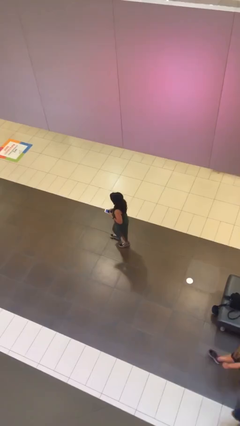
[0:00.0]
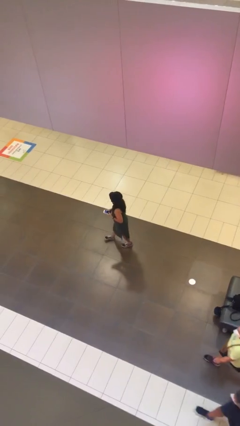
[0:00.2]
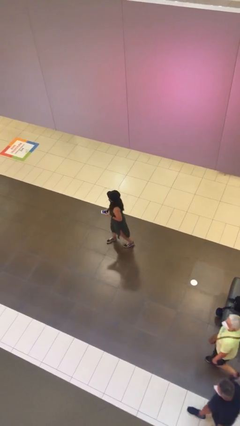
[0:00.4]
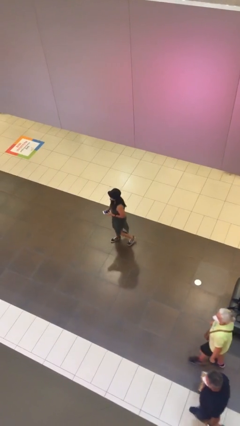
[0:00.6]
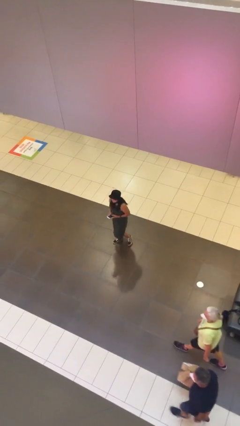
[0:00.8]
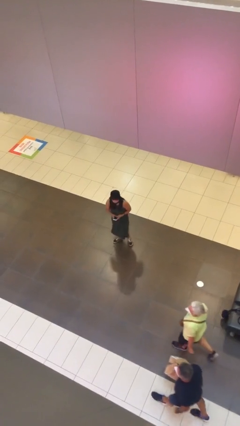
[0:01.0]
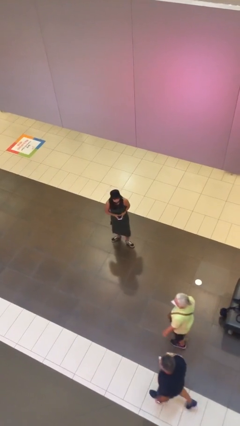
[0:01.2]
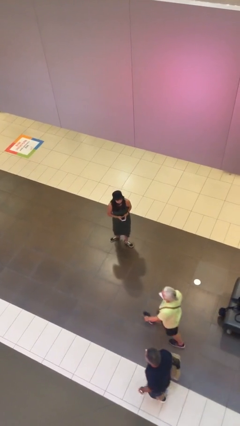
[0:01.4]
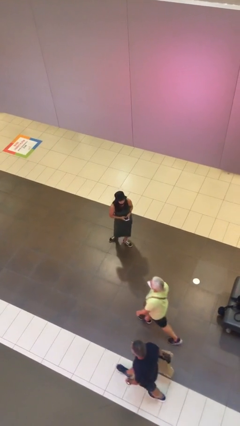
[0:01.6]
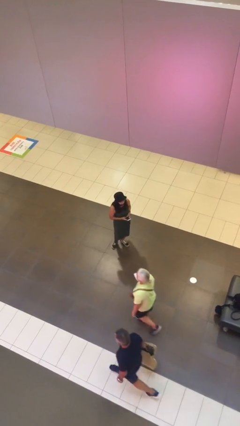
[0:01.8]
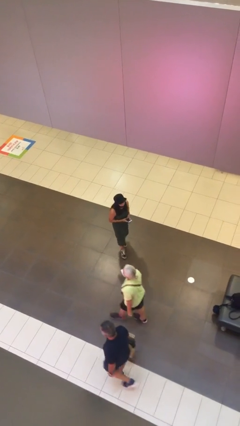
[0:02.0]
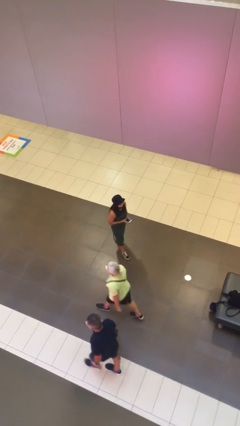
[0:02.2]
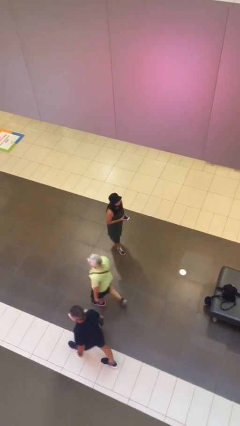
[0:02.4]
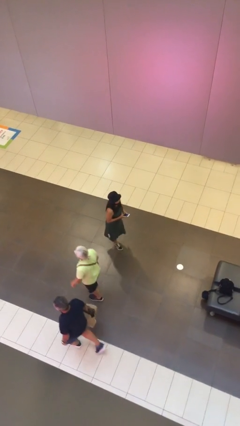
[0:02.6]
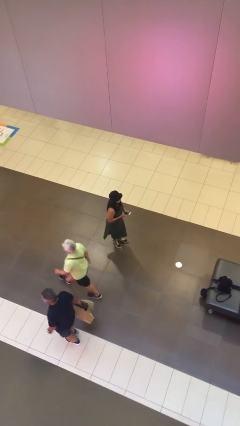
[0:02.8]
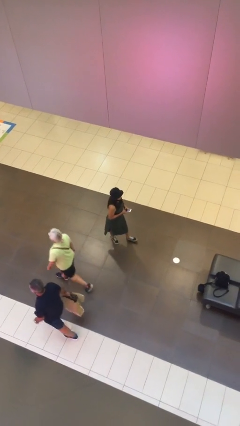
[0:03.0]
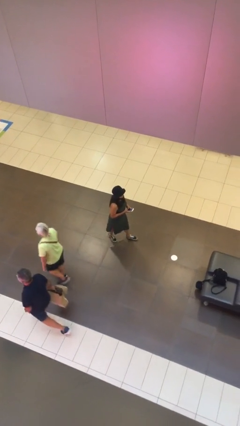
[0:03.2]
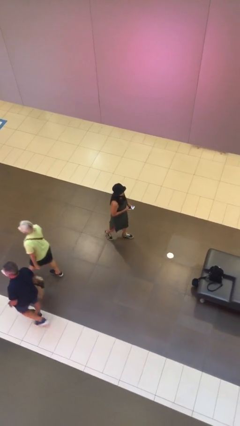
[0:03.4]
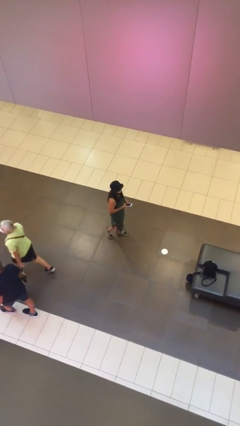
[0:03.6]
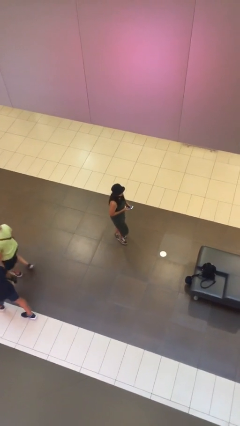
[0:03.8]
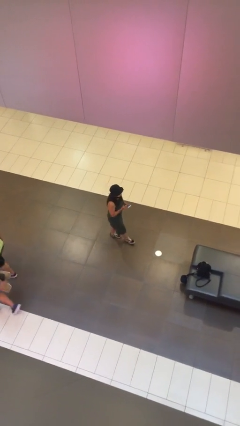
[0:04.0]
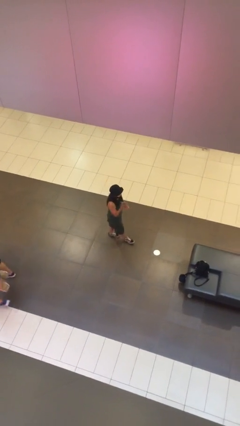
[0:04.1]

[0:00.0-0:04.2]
person texts on phone

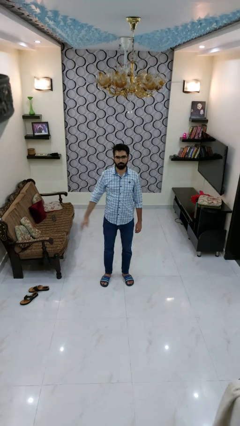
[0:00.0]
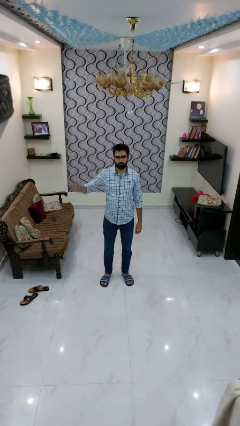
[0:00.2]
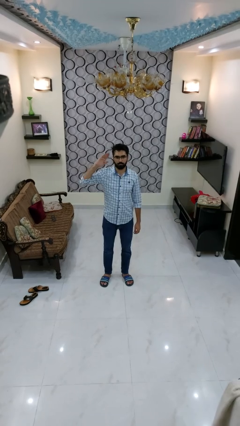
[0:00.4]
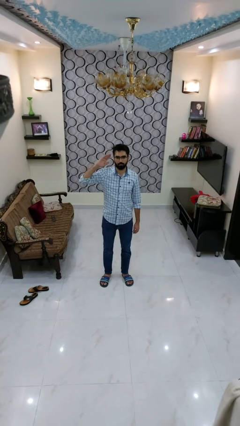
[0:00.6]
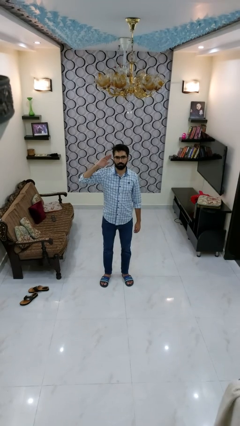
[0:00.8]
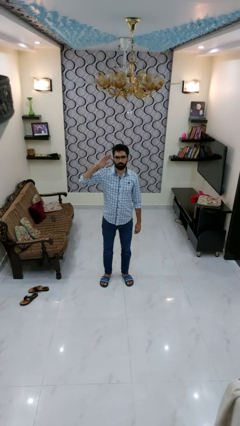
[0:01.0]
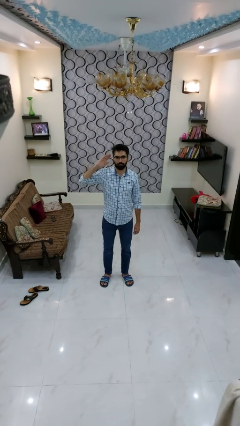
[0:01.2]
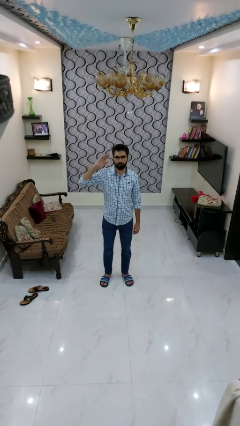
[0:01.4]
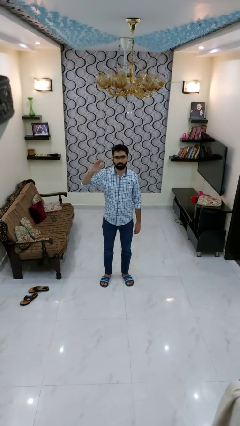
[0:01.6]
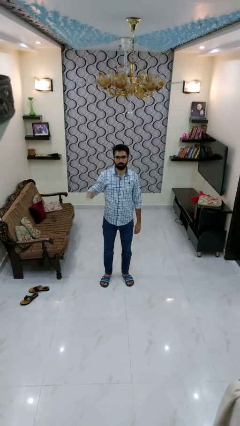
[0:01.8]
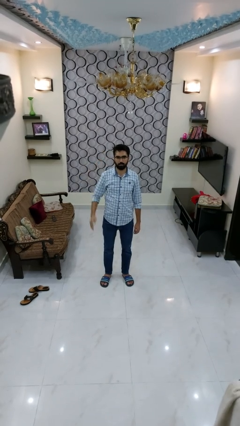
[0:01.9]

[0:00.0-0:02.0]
person salutes

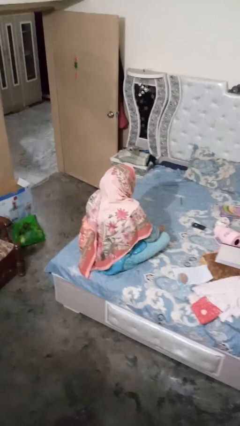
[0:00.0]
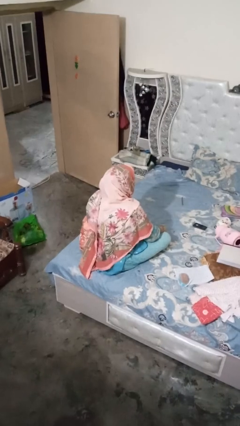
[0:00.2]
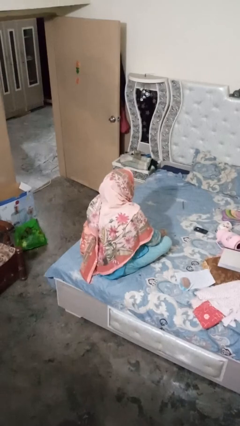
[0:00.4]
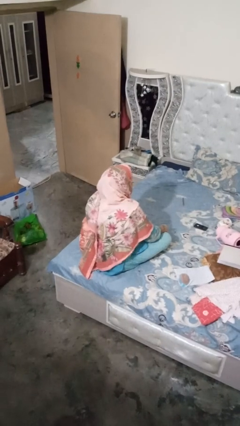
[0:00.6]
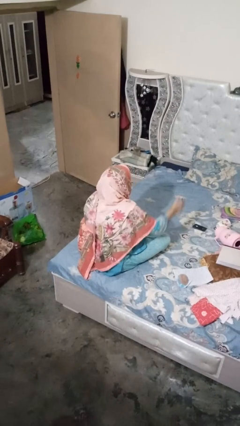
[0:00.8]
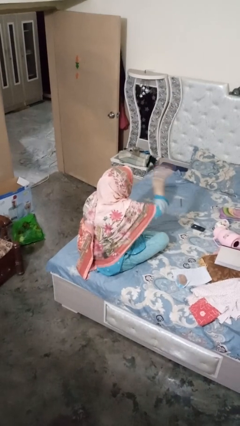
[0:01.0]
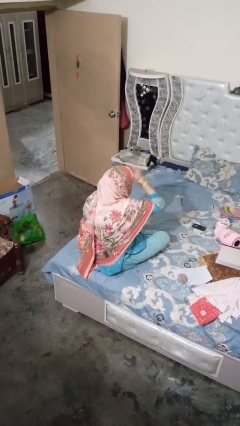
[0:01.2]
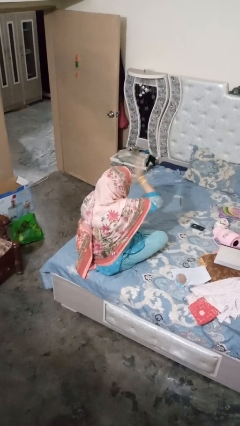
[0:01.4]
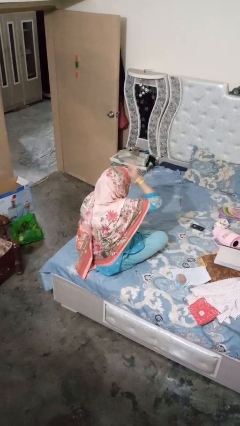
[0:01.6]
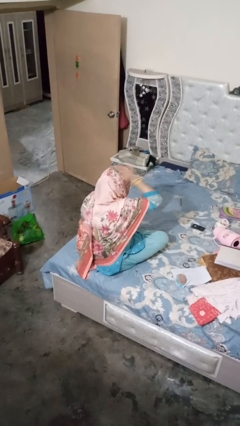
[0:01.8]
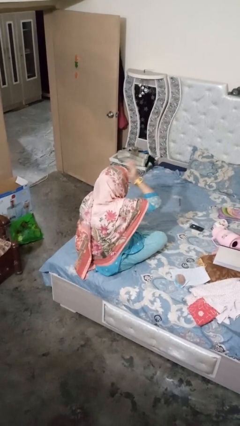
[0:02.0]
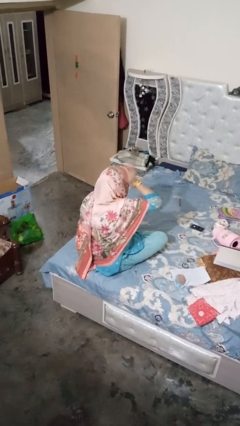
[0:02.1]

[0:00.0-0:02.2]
person pats head

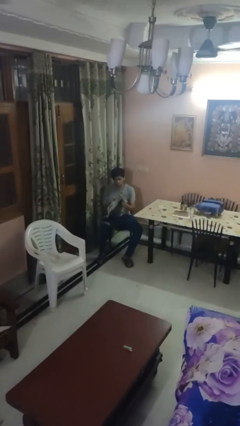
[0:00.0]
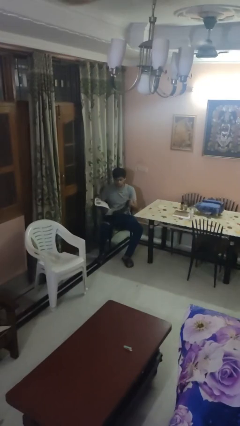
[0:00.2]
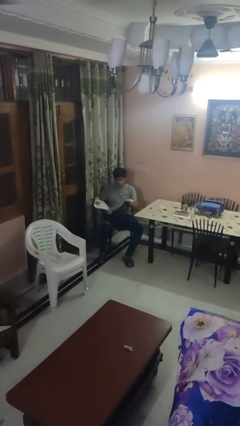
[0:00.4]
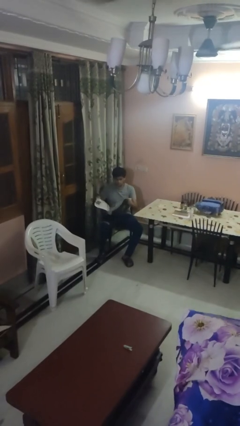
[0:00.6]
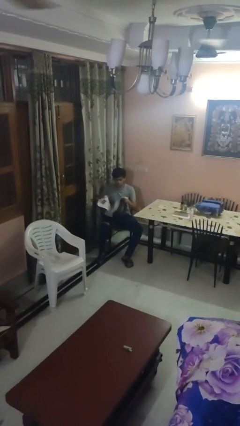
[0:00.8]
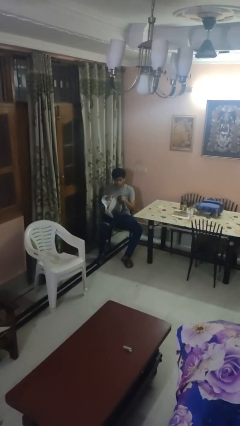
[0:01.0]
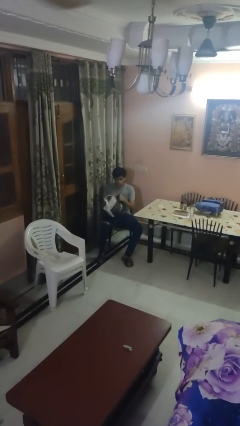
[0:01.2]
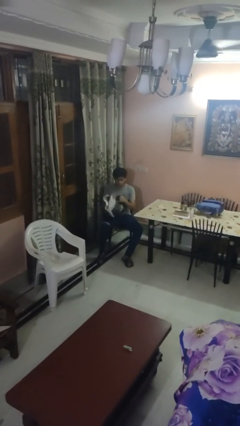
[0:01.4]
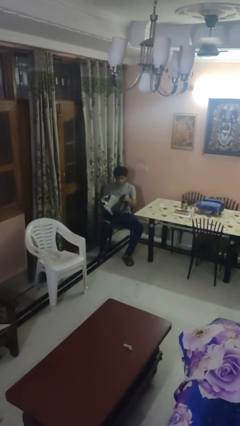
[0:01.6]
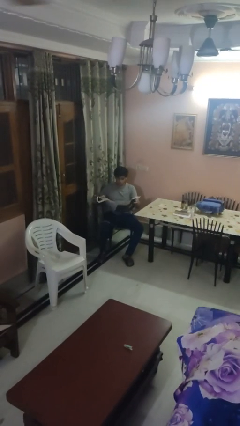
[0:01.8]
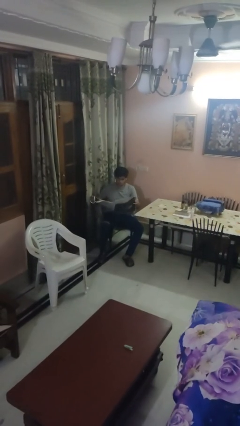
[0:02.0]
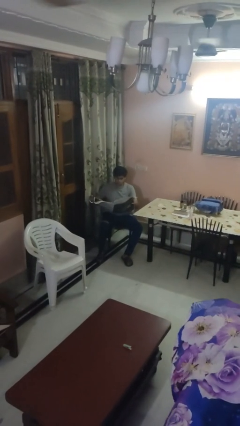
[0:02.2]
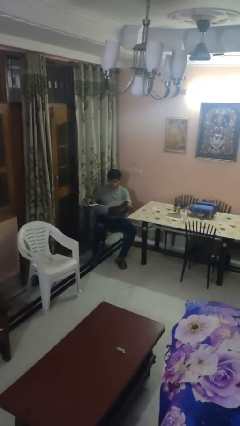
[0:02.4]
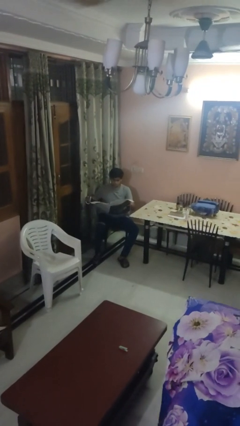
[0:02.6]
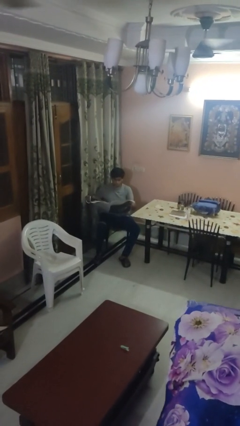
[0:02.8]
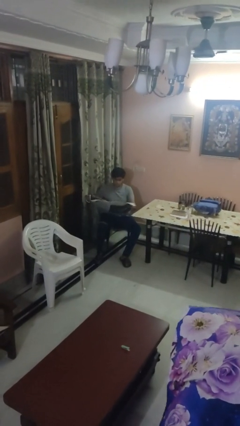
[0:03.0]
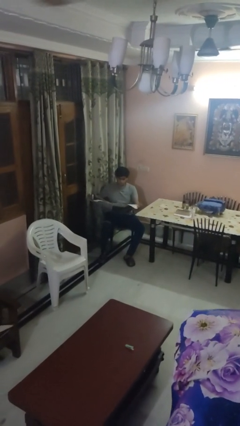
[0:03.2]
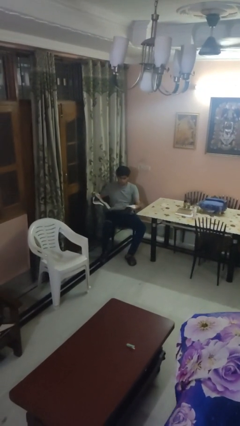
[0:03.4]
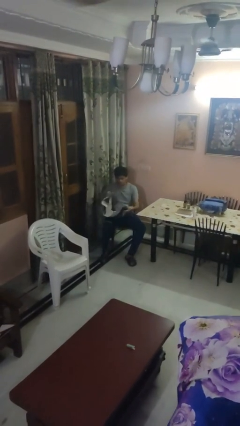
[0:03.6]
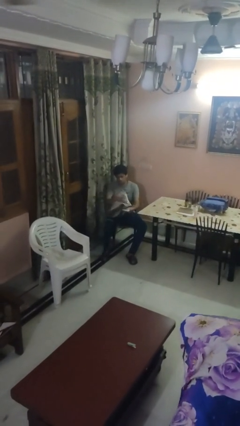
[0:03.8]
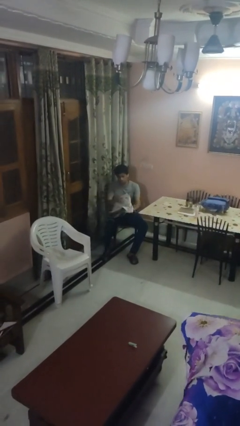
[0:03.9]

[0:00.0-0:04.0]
person reads newspaper

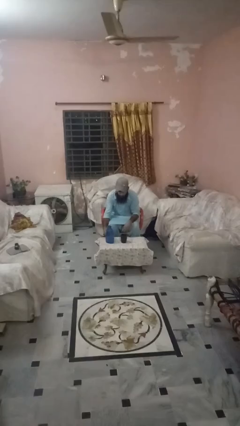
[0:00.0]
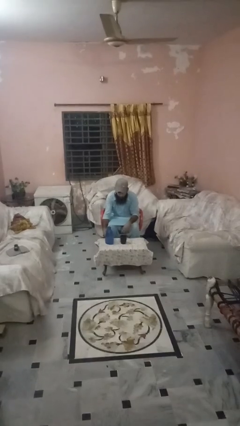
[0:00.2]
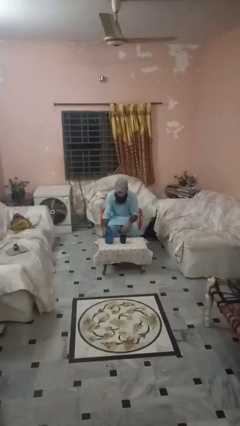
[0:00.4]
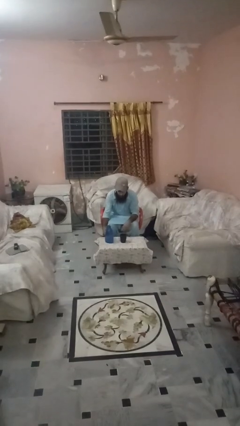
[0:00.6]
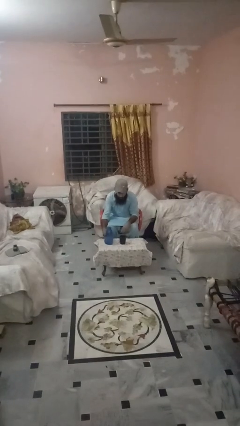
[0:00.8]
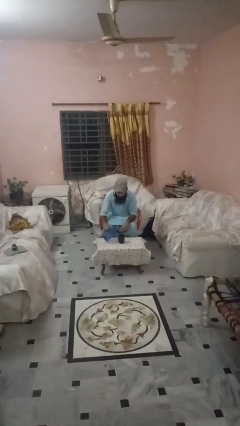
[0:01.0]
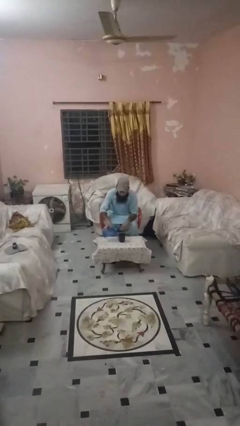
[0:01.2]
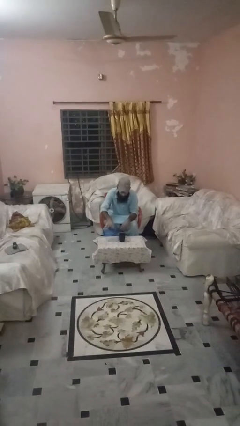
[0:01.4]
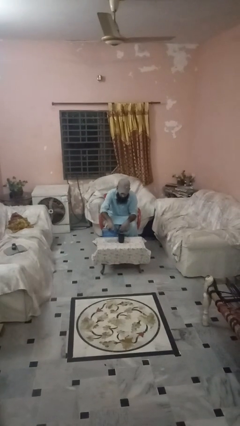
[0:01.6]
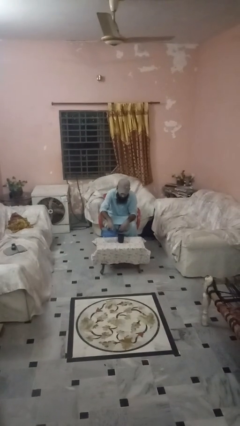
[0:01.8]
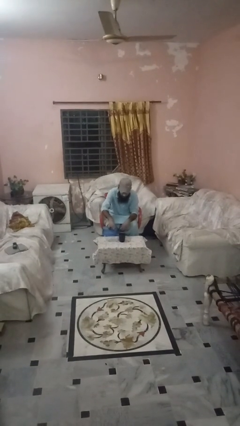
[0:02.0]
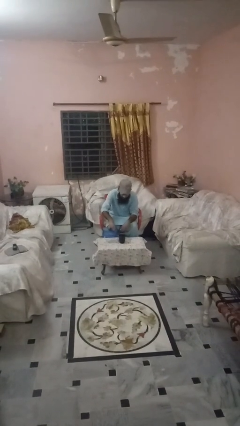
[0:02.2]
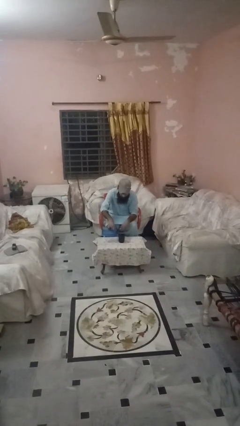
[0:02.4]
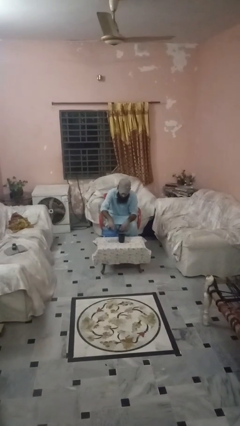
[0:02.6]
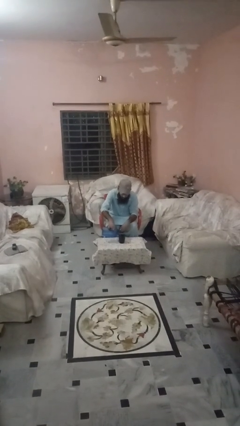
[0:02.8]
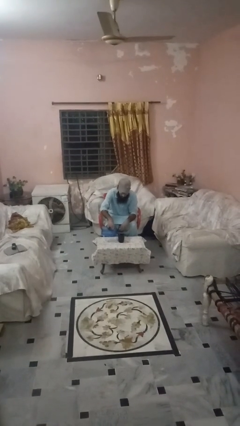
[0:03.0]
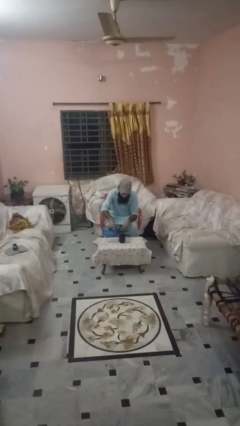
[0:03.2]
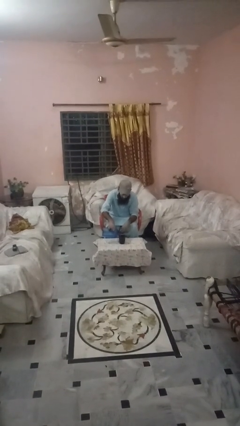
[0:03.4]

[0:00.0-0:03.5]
person pours liquid into cup

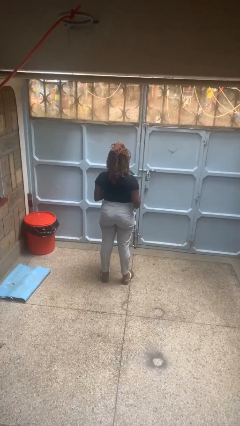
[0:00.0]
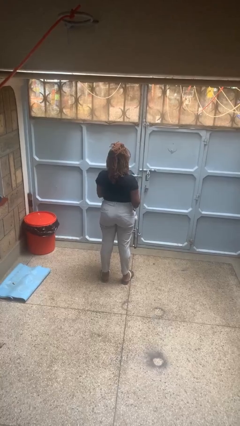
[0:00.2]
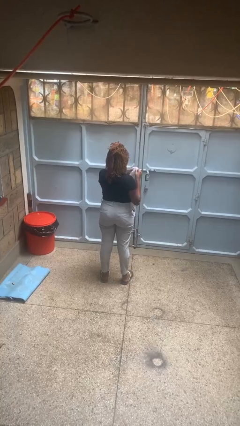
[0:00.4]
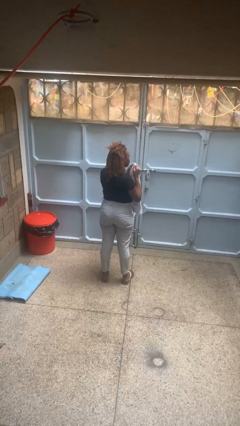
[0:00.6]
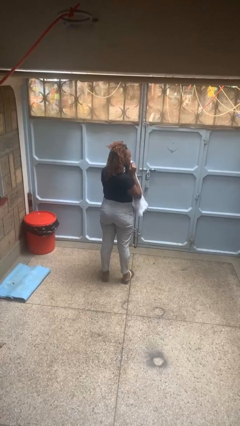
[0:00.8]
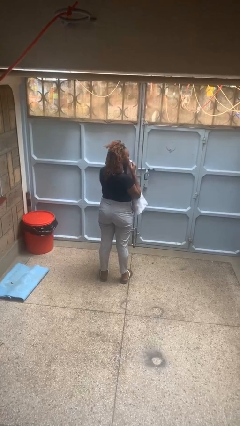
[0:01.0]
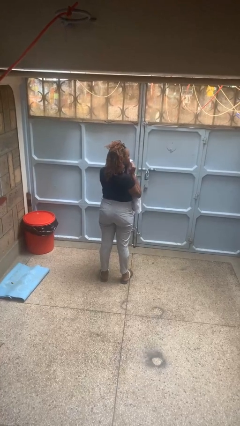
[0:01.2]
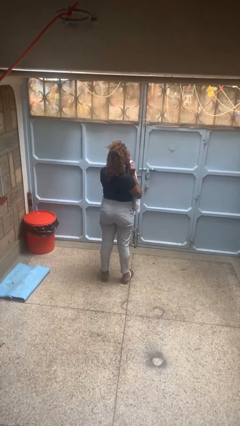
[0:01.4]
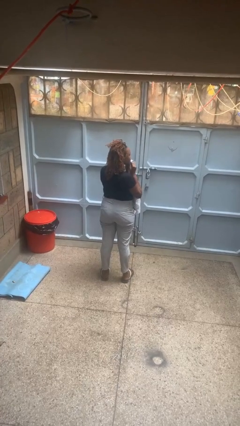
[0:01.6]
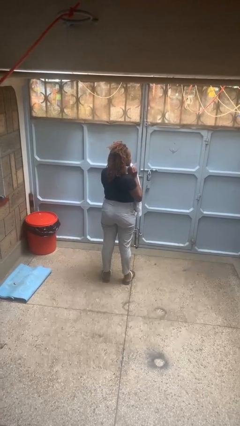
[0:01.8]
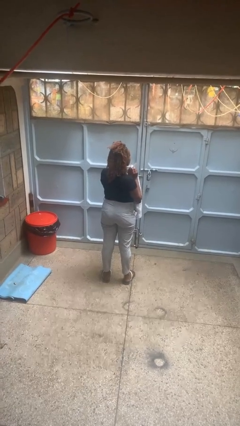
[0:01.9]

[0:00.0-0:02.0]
person wipes mouth with napkin
